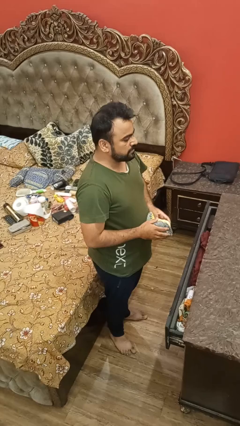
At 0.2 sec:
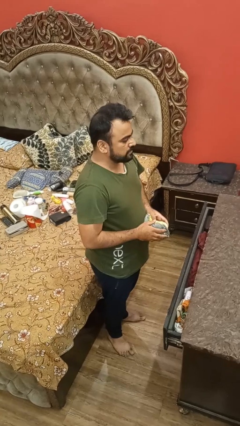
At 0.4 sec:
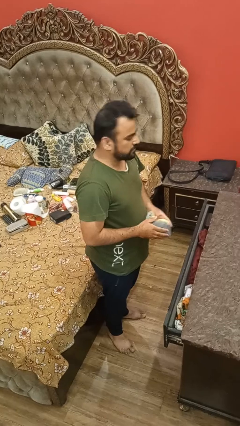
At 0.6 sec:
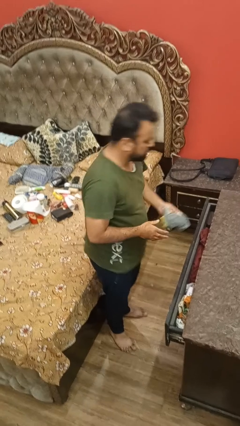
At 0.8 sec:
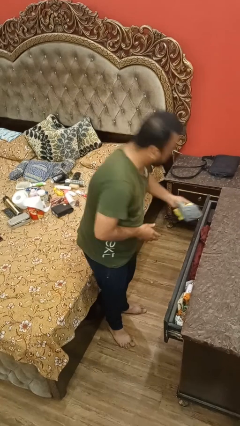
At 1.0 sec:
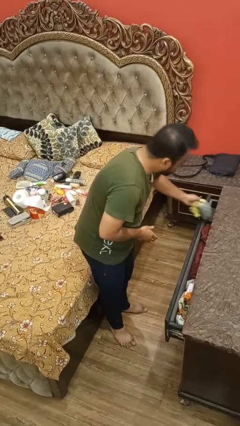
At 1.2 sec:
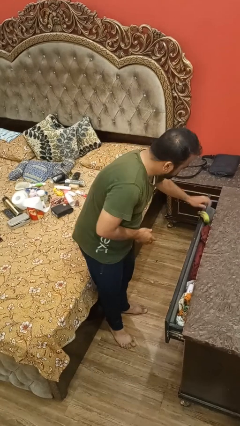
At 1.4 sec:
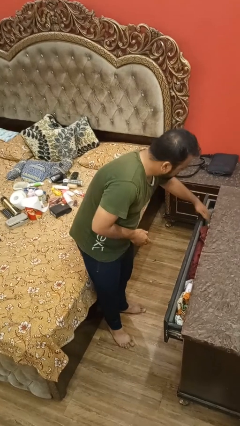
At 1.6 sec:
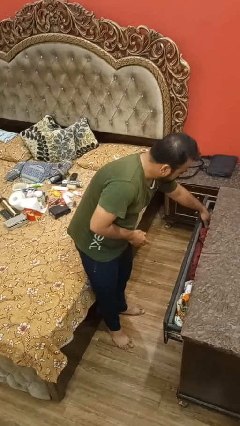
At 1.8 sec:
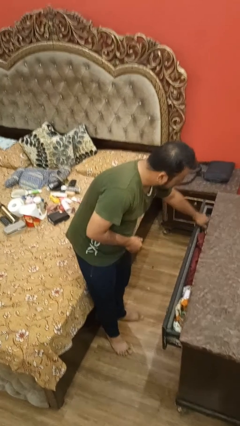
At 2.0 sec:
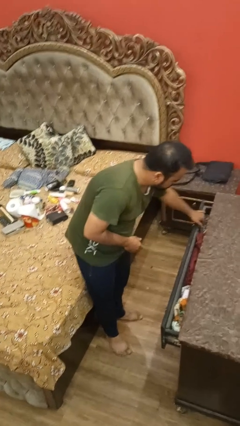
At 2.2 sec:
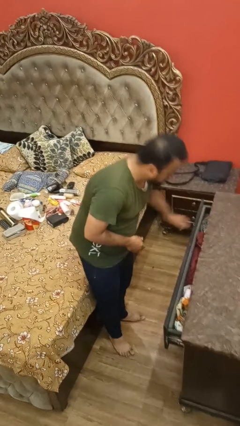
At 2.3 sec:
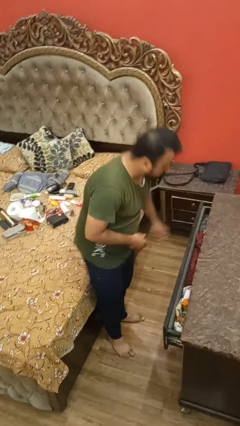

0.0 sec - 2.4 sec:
person puts clothes into dresser

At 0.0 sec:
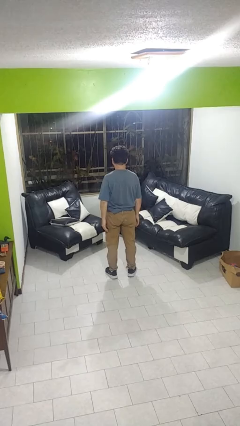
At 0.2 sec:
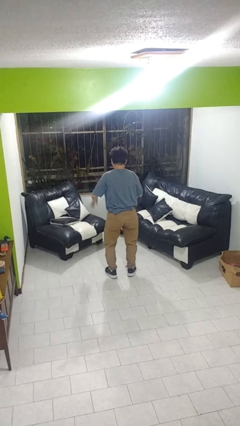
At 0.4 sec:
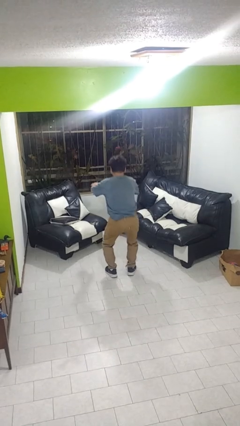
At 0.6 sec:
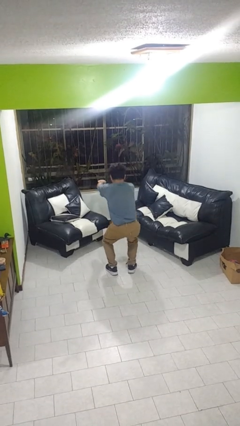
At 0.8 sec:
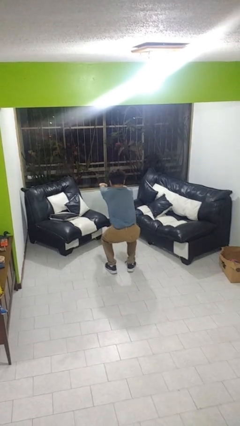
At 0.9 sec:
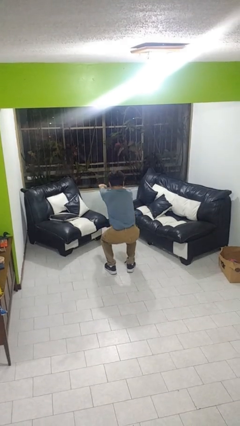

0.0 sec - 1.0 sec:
person squats

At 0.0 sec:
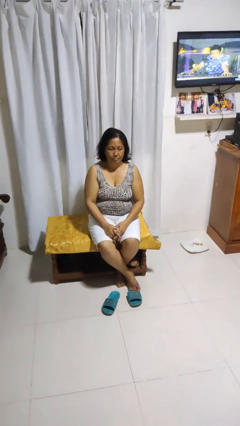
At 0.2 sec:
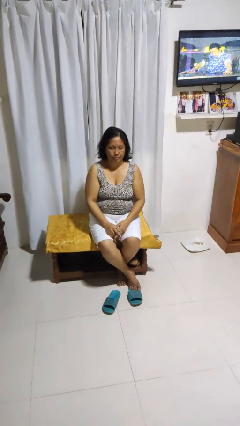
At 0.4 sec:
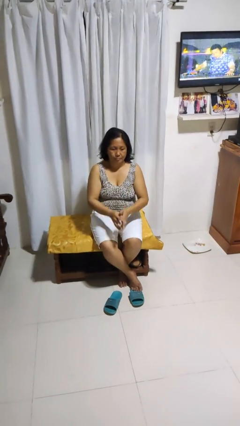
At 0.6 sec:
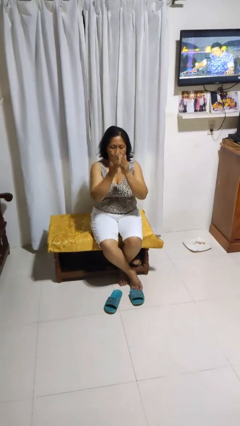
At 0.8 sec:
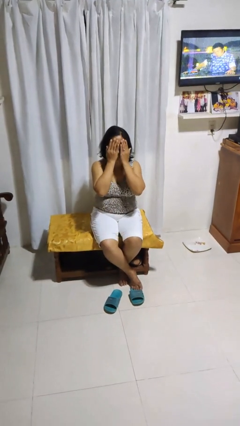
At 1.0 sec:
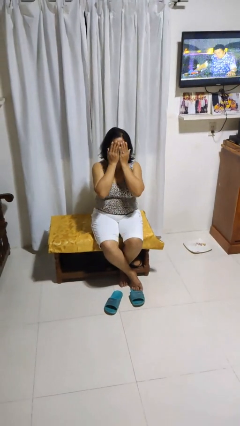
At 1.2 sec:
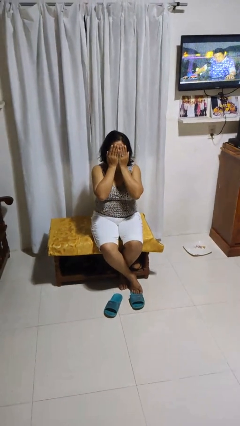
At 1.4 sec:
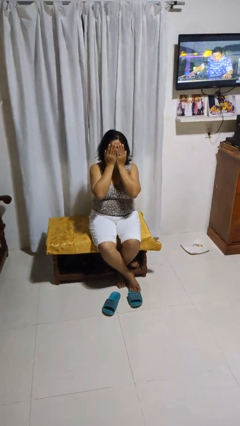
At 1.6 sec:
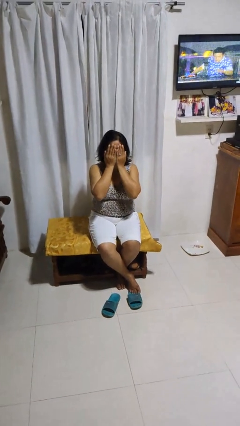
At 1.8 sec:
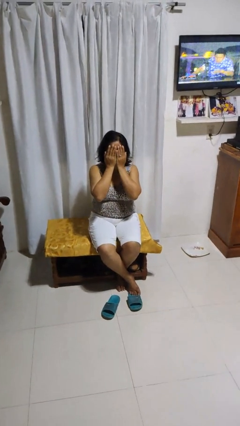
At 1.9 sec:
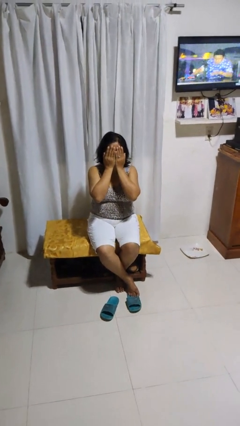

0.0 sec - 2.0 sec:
person covers face with hands

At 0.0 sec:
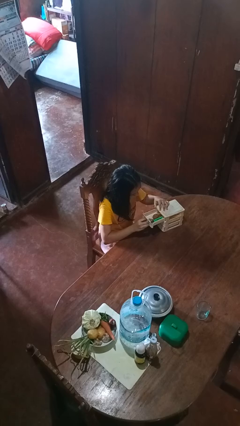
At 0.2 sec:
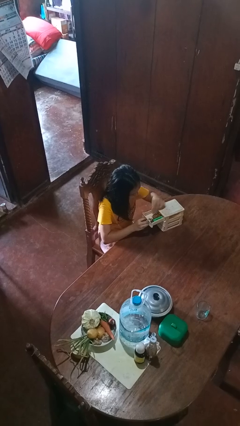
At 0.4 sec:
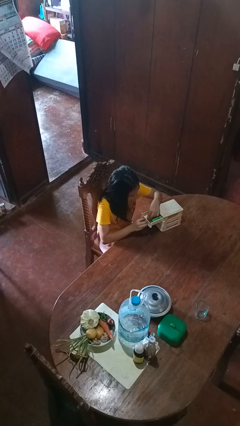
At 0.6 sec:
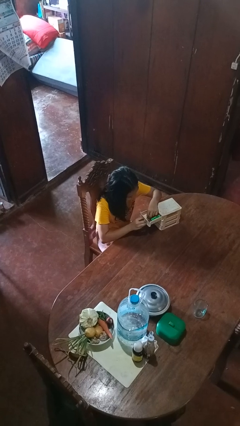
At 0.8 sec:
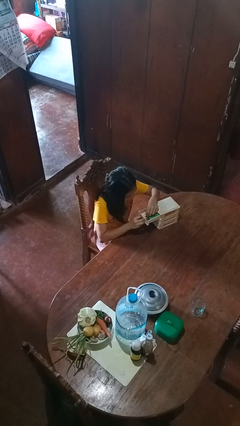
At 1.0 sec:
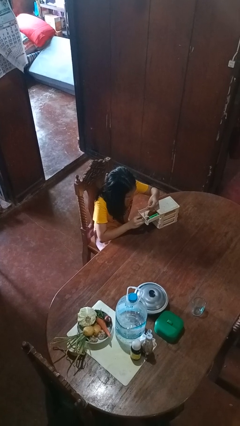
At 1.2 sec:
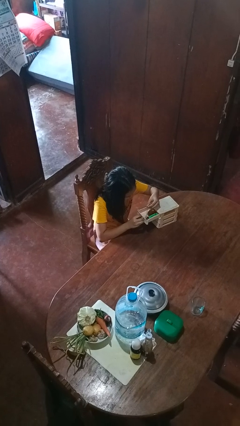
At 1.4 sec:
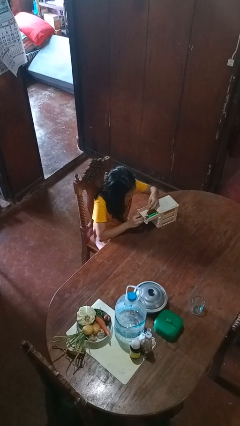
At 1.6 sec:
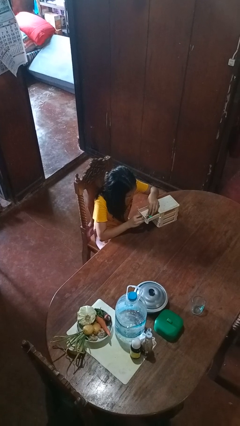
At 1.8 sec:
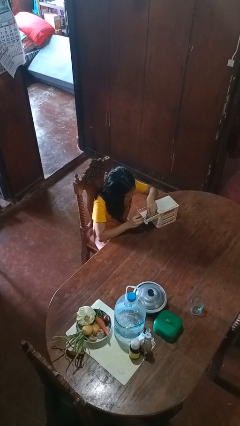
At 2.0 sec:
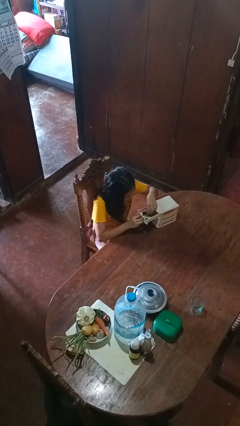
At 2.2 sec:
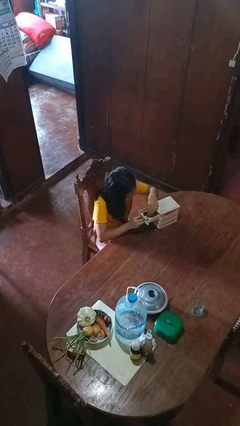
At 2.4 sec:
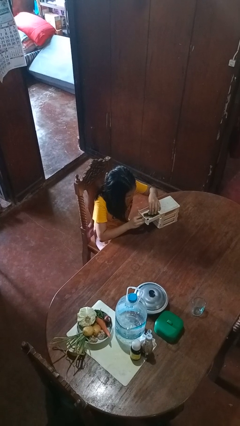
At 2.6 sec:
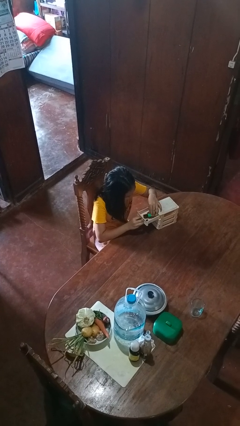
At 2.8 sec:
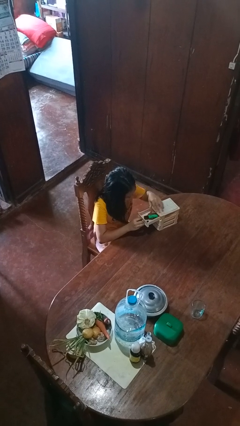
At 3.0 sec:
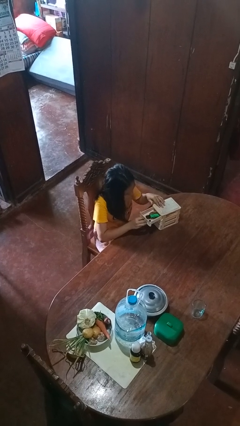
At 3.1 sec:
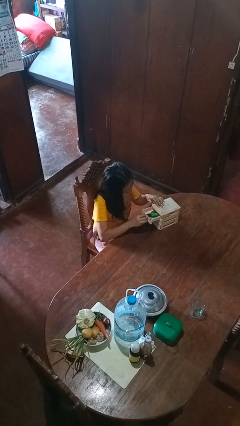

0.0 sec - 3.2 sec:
person searches jewelry box

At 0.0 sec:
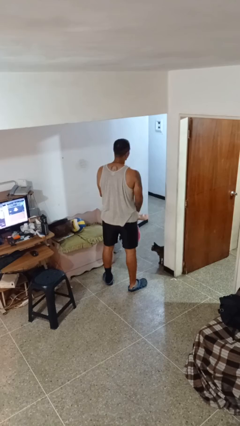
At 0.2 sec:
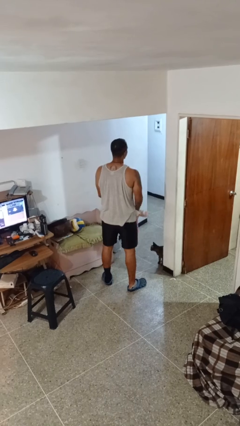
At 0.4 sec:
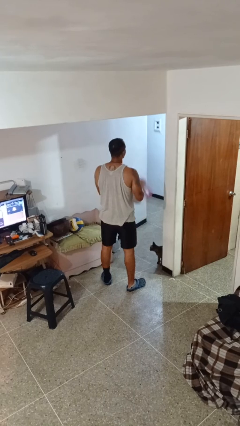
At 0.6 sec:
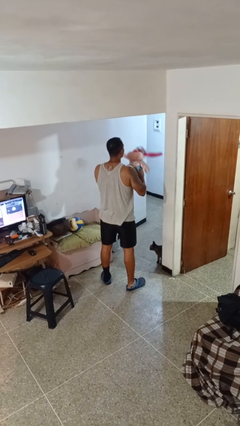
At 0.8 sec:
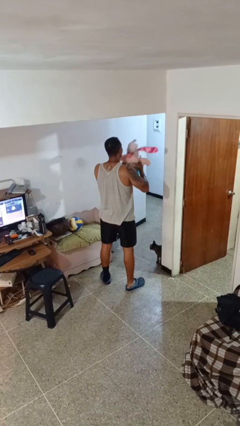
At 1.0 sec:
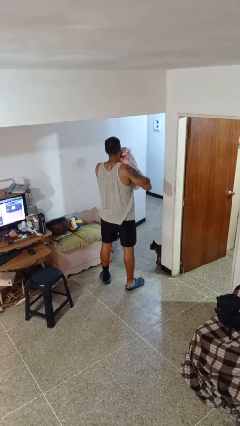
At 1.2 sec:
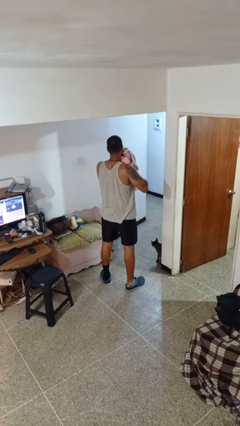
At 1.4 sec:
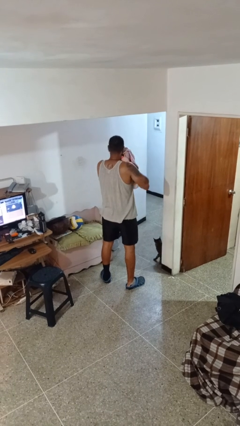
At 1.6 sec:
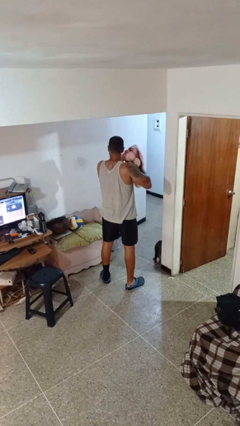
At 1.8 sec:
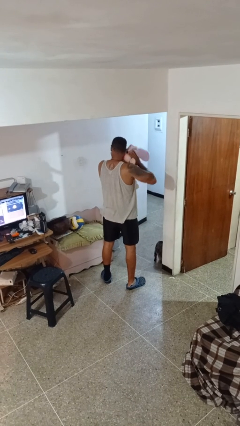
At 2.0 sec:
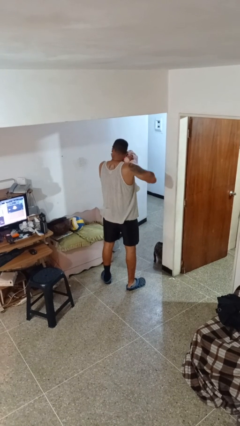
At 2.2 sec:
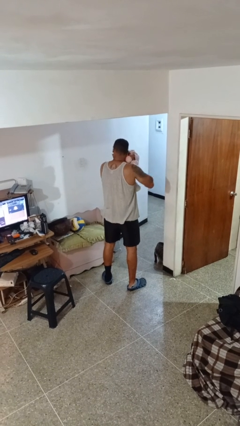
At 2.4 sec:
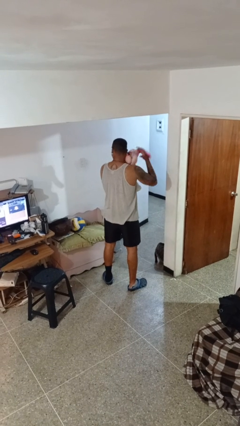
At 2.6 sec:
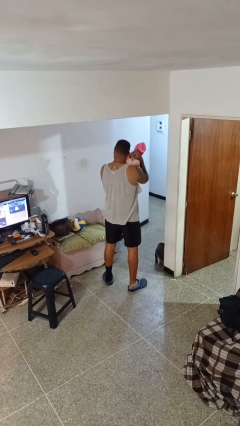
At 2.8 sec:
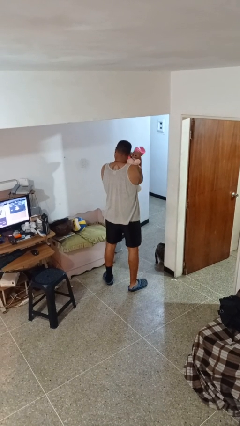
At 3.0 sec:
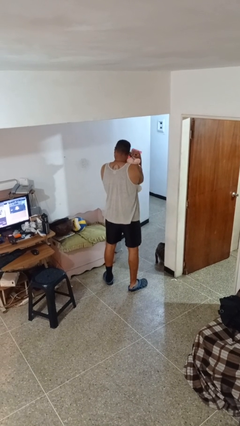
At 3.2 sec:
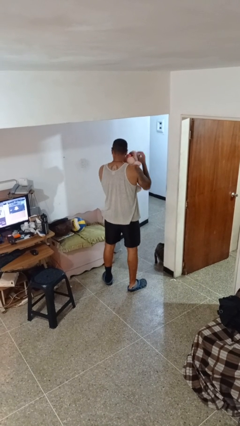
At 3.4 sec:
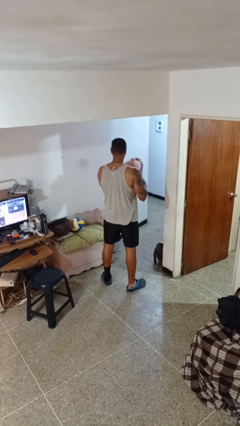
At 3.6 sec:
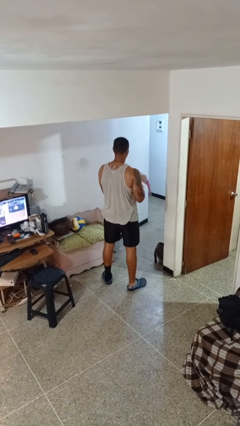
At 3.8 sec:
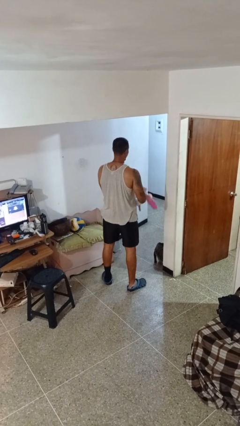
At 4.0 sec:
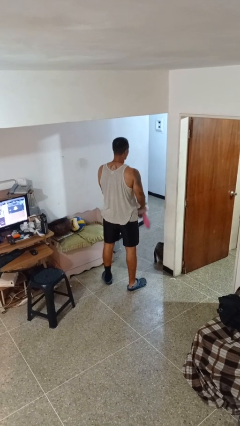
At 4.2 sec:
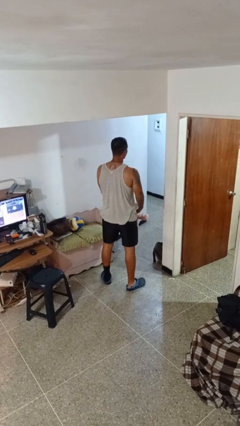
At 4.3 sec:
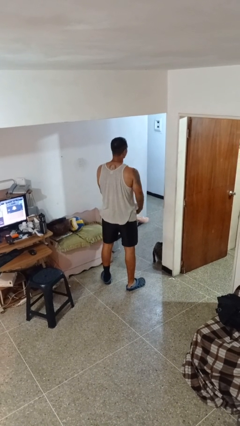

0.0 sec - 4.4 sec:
person squeezes object

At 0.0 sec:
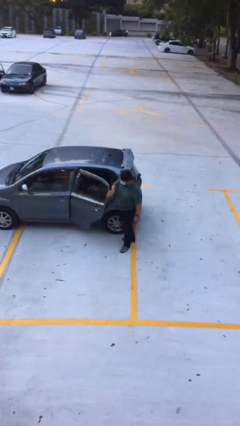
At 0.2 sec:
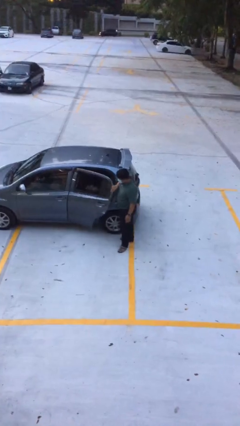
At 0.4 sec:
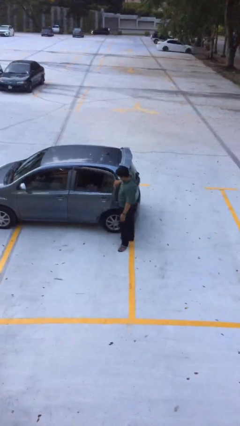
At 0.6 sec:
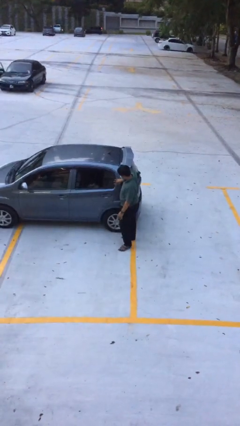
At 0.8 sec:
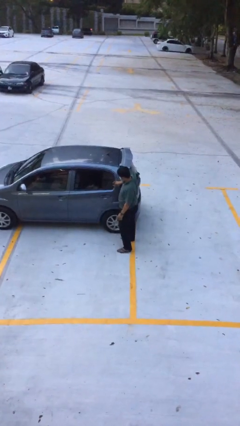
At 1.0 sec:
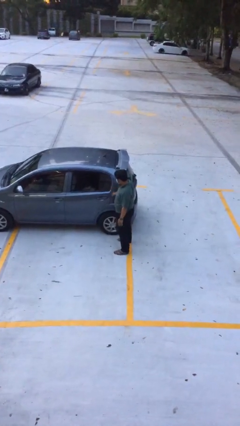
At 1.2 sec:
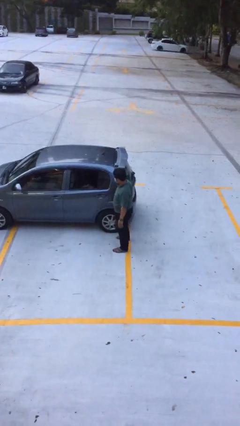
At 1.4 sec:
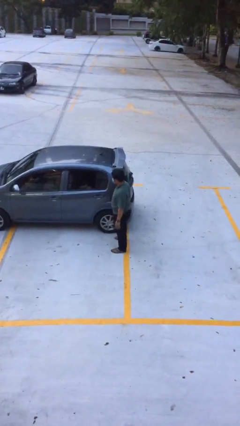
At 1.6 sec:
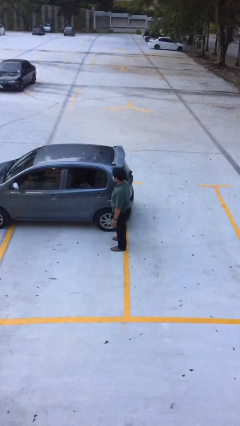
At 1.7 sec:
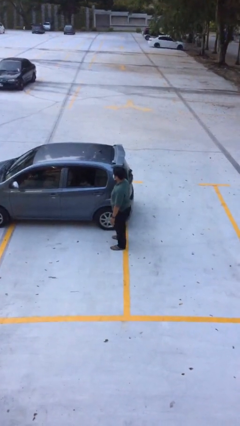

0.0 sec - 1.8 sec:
person closes car door

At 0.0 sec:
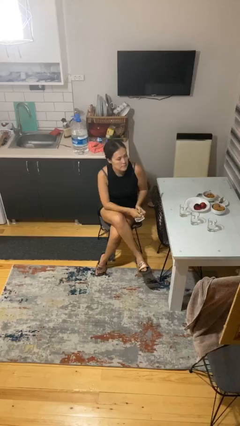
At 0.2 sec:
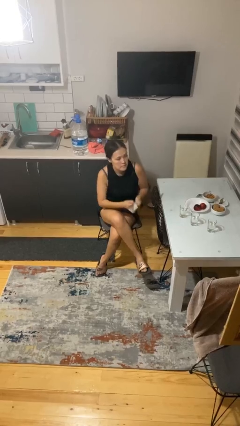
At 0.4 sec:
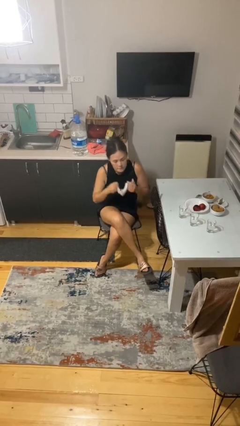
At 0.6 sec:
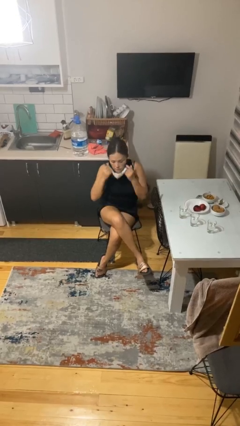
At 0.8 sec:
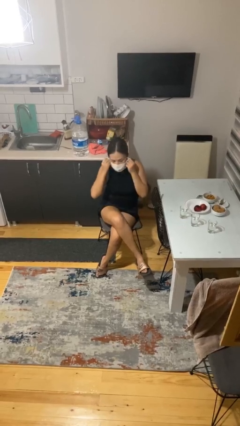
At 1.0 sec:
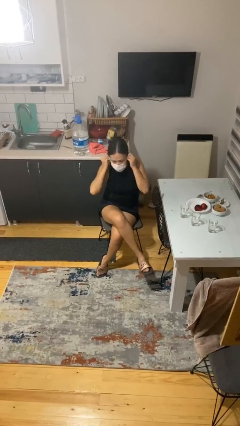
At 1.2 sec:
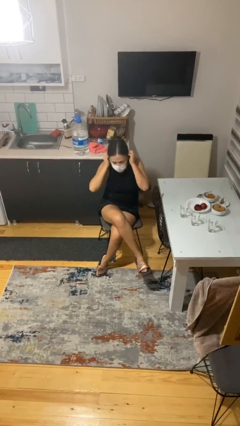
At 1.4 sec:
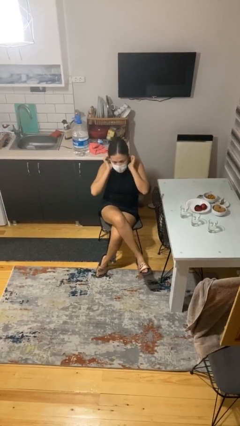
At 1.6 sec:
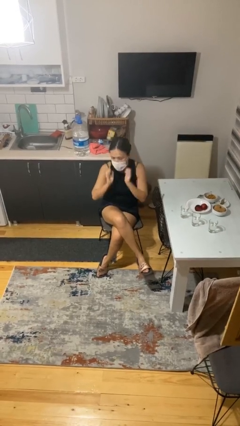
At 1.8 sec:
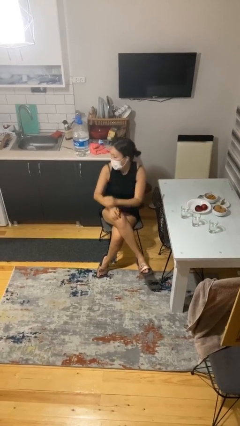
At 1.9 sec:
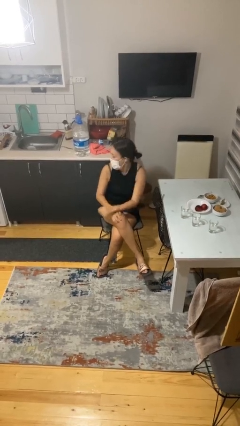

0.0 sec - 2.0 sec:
person puts on facemask
